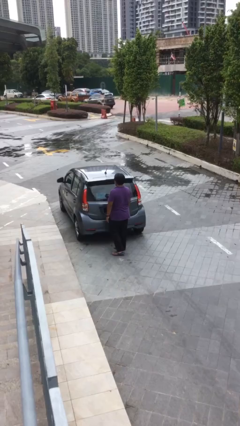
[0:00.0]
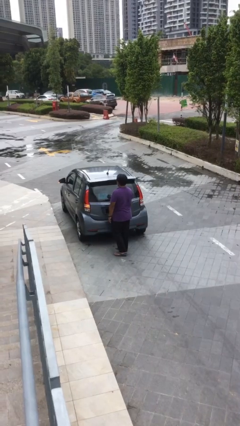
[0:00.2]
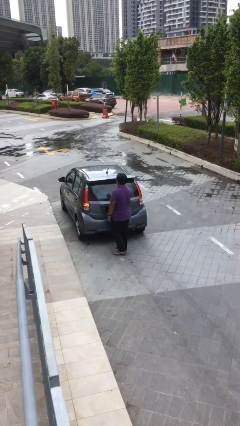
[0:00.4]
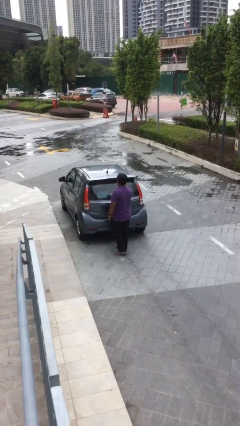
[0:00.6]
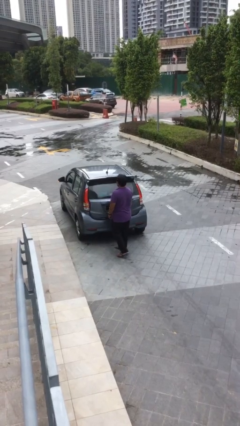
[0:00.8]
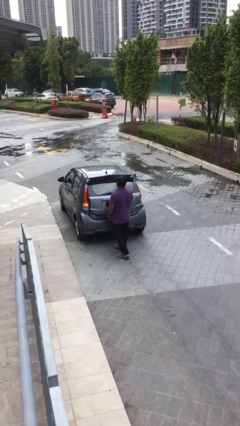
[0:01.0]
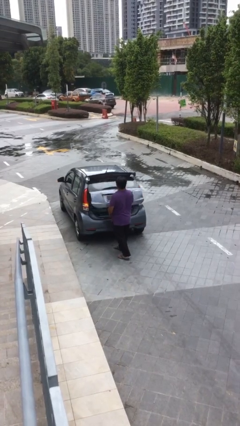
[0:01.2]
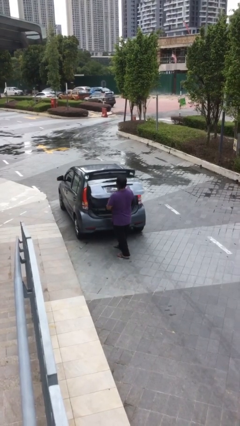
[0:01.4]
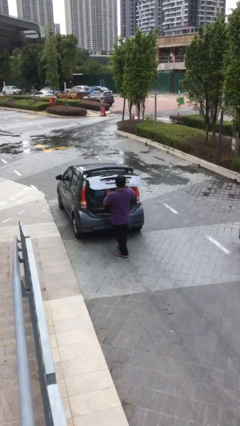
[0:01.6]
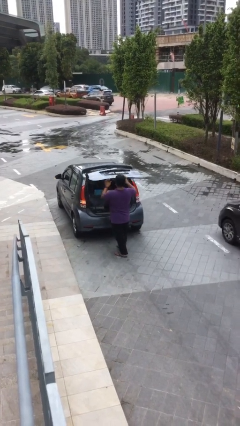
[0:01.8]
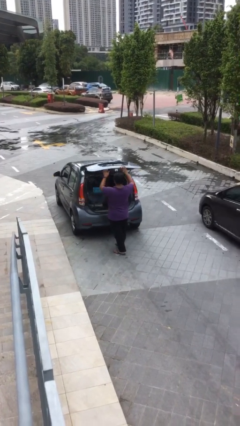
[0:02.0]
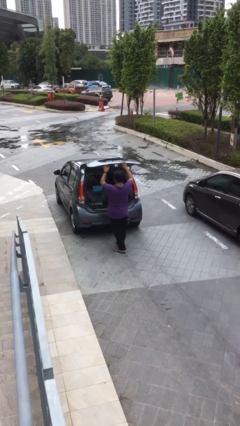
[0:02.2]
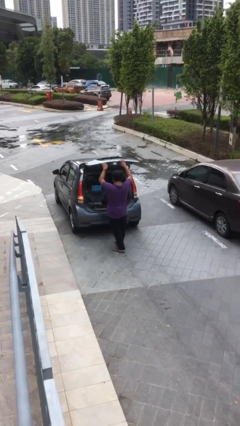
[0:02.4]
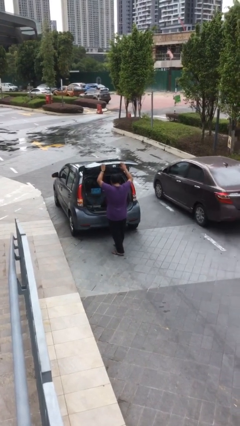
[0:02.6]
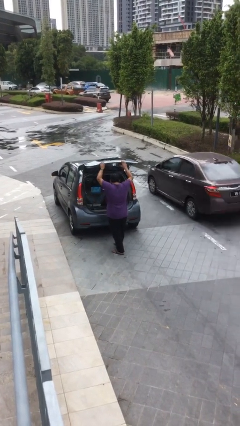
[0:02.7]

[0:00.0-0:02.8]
person opens car trunk

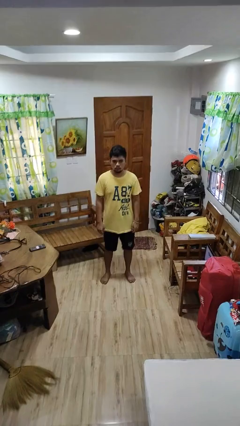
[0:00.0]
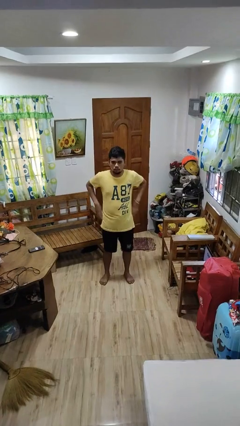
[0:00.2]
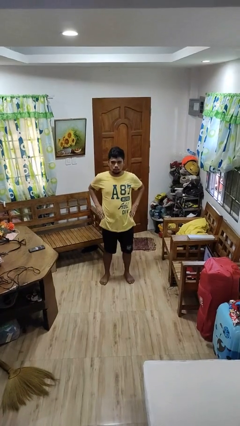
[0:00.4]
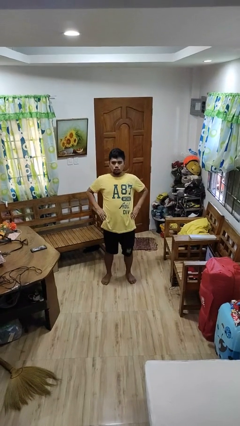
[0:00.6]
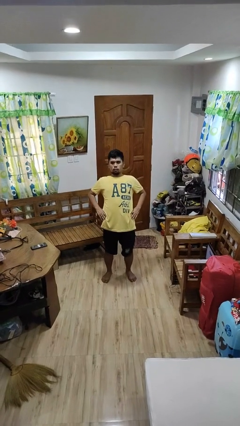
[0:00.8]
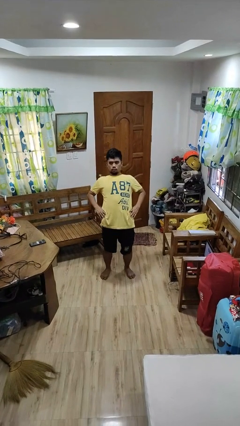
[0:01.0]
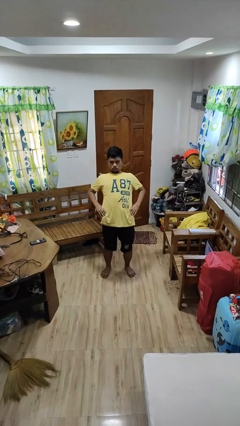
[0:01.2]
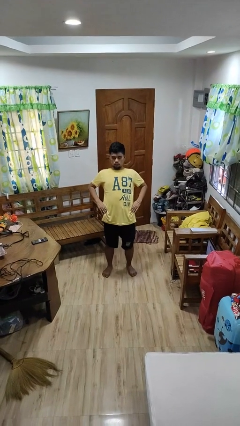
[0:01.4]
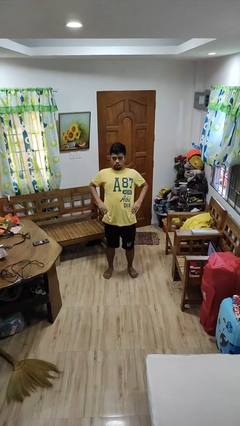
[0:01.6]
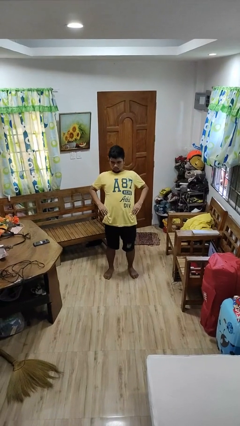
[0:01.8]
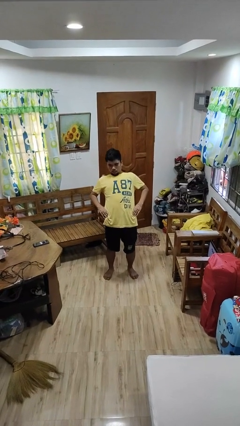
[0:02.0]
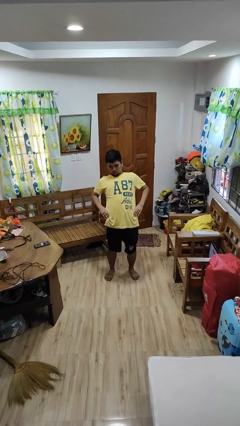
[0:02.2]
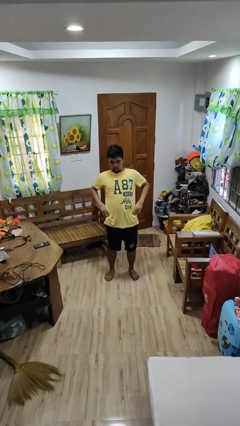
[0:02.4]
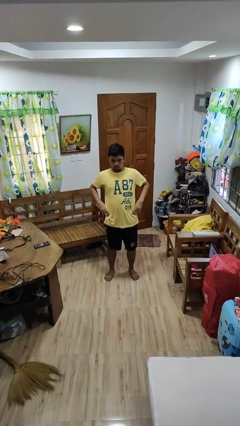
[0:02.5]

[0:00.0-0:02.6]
person stretches back

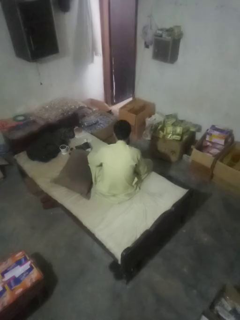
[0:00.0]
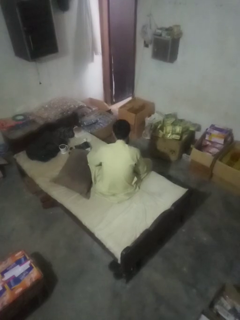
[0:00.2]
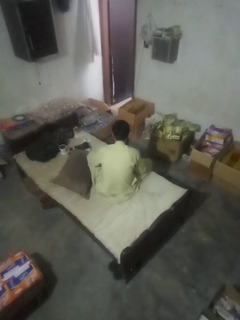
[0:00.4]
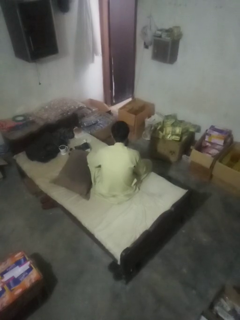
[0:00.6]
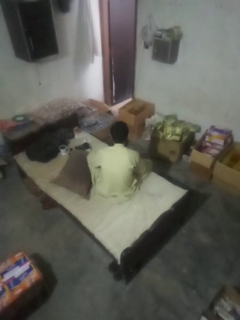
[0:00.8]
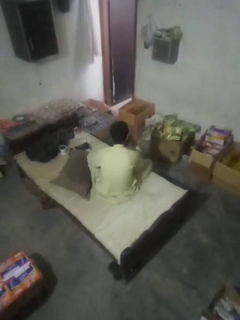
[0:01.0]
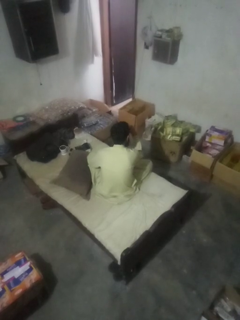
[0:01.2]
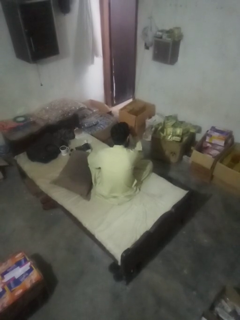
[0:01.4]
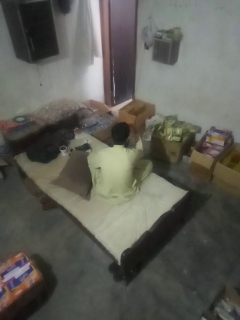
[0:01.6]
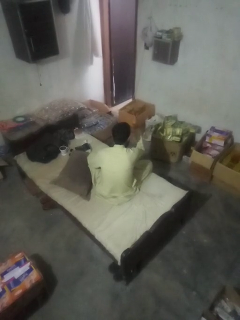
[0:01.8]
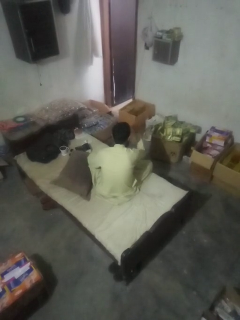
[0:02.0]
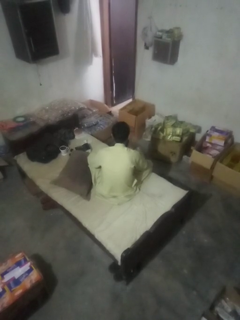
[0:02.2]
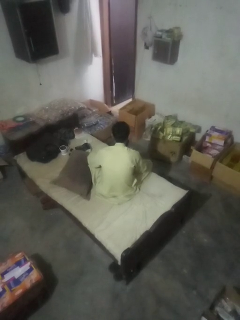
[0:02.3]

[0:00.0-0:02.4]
person gestures watch closely

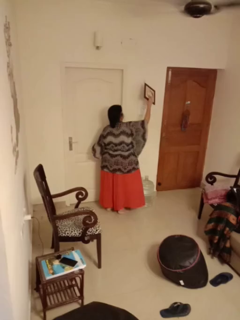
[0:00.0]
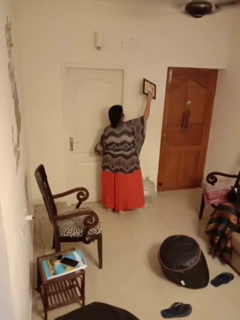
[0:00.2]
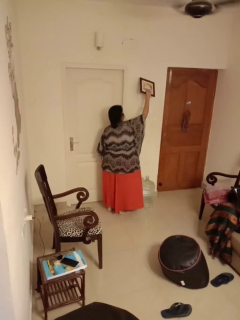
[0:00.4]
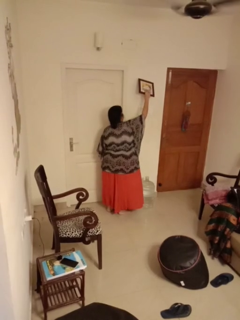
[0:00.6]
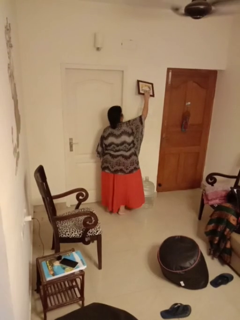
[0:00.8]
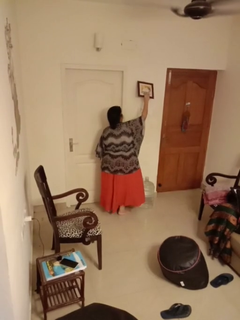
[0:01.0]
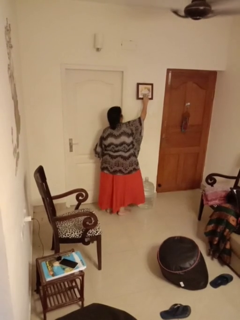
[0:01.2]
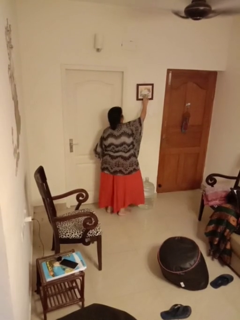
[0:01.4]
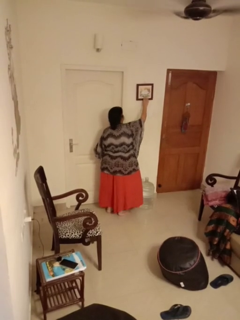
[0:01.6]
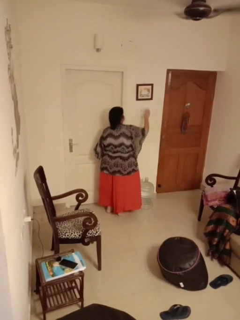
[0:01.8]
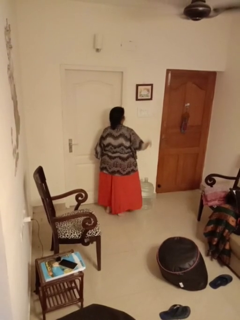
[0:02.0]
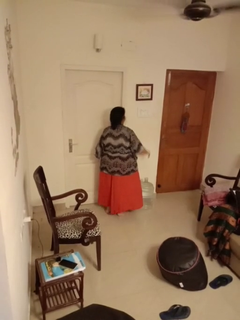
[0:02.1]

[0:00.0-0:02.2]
person puts up picture frame

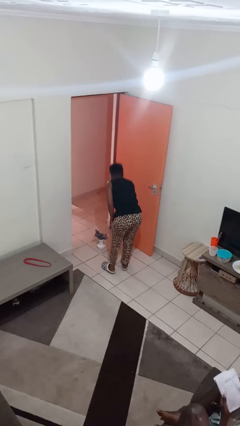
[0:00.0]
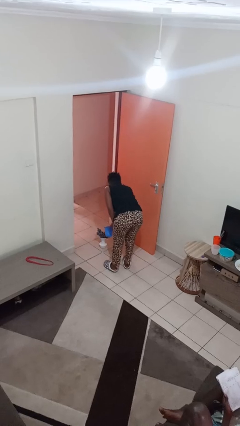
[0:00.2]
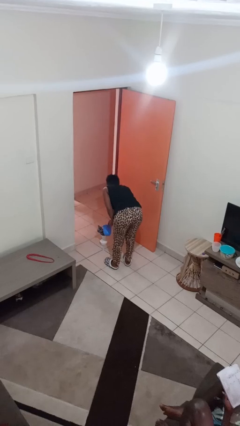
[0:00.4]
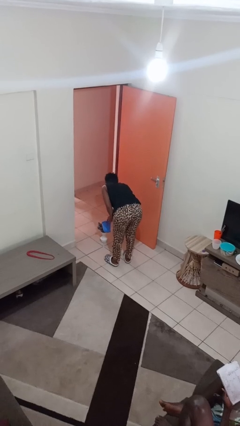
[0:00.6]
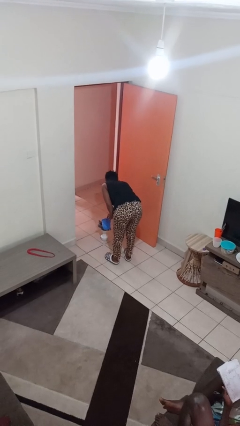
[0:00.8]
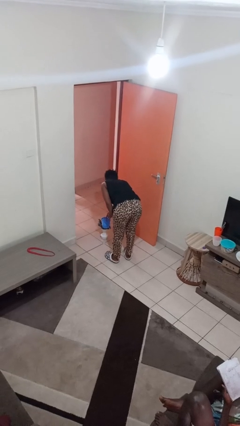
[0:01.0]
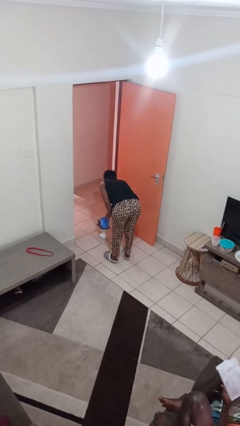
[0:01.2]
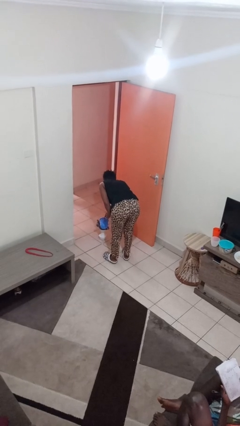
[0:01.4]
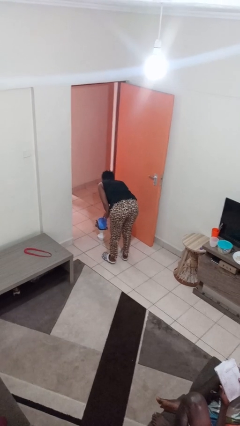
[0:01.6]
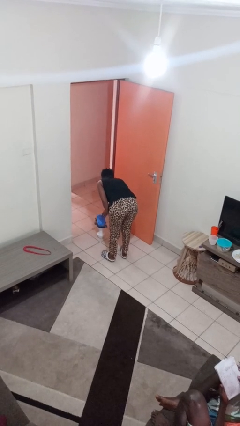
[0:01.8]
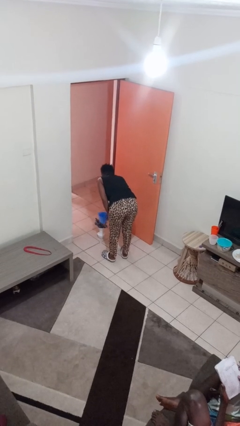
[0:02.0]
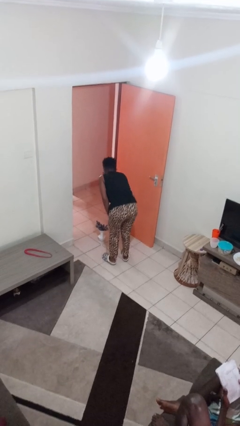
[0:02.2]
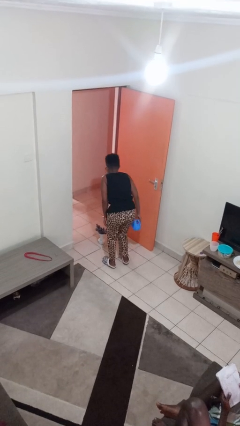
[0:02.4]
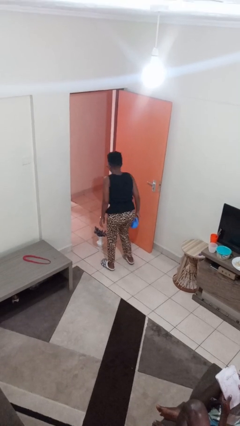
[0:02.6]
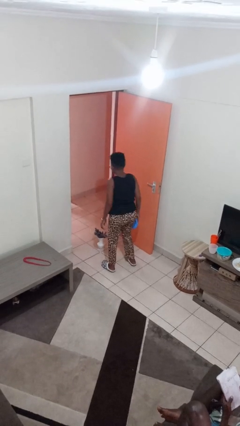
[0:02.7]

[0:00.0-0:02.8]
person waters houseplant

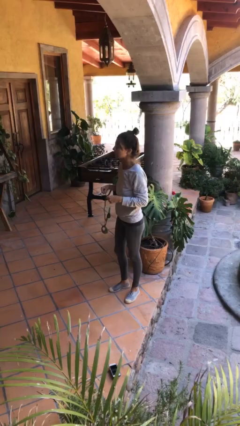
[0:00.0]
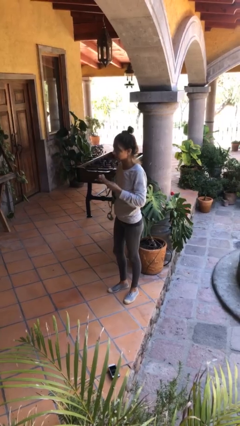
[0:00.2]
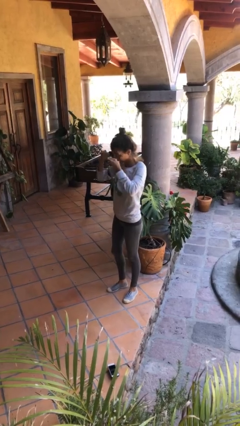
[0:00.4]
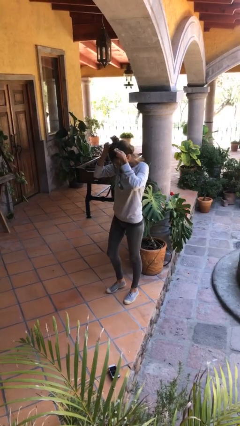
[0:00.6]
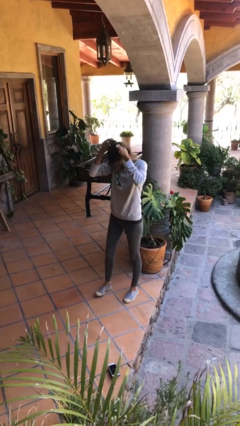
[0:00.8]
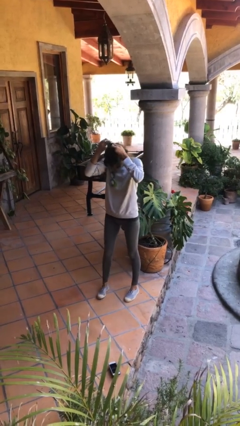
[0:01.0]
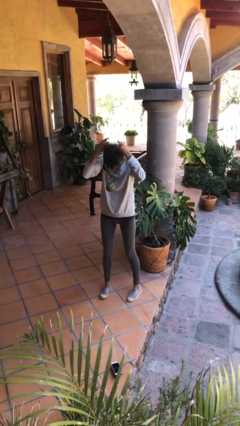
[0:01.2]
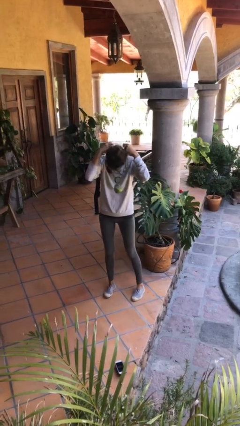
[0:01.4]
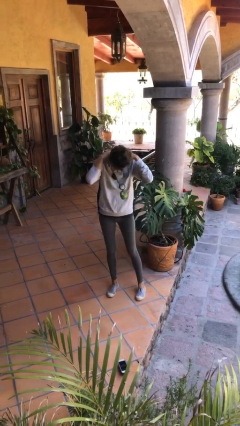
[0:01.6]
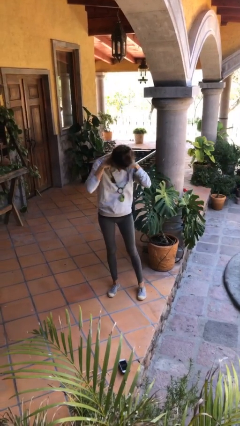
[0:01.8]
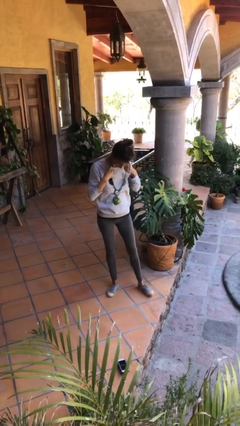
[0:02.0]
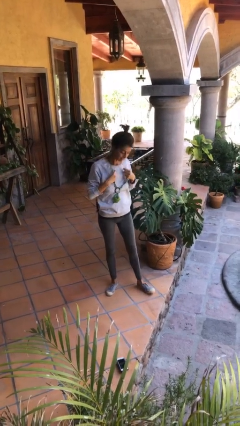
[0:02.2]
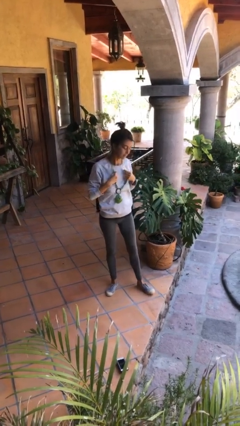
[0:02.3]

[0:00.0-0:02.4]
person puts on necklace

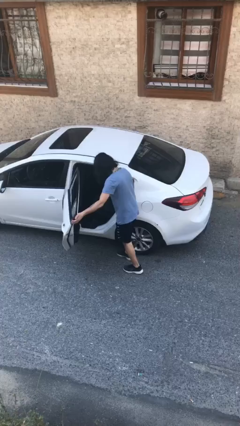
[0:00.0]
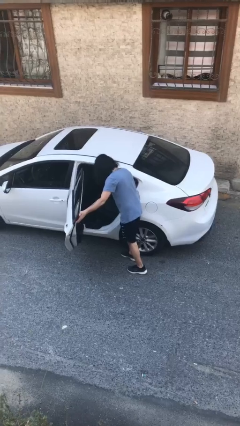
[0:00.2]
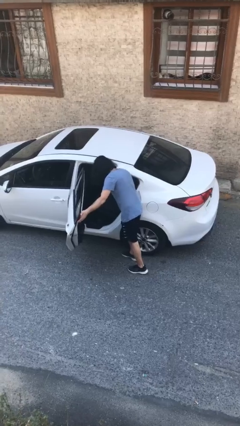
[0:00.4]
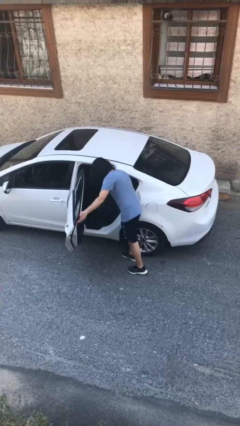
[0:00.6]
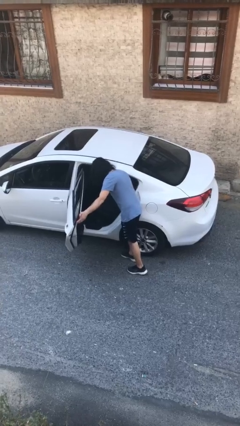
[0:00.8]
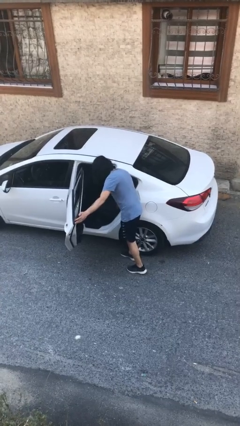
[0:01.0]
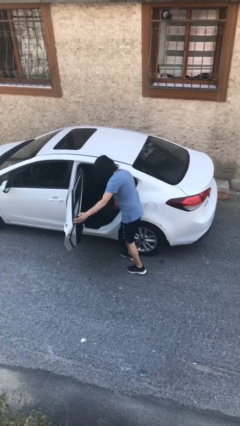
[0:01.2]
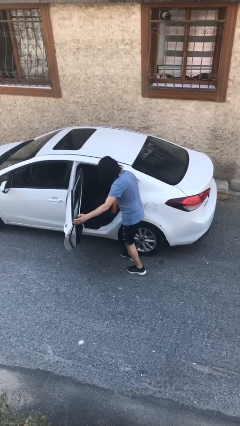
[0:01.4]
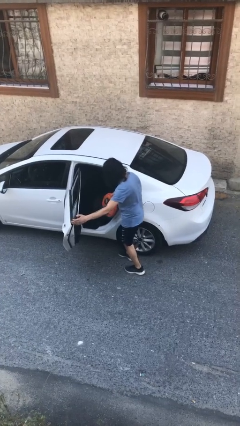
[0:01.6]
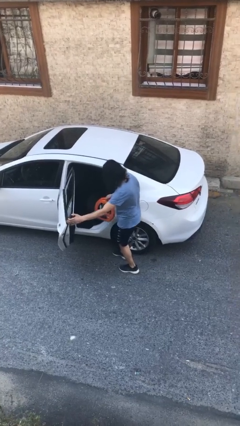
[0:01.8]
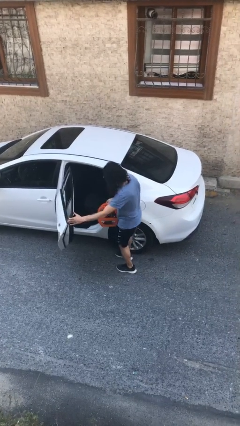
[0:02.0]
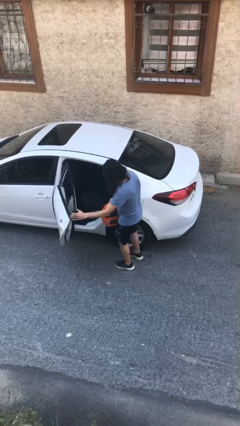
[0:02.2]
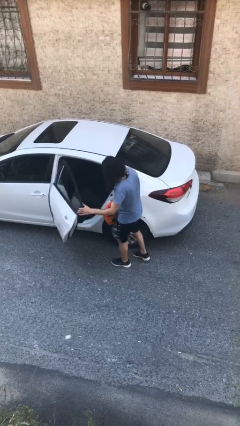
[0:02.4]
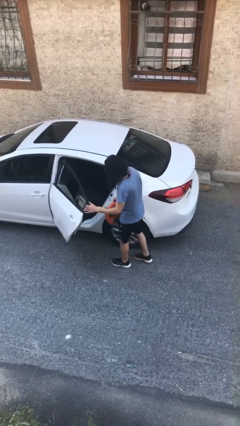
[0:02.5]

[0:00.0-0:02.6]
person unloads car
